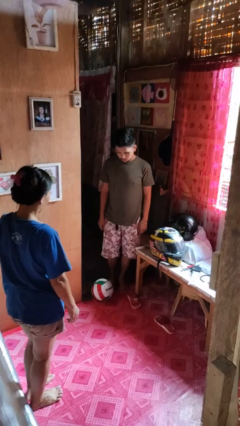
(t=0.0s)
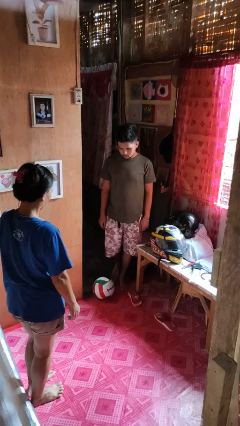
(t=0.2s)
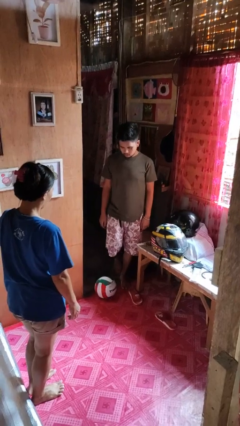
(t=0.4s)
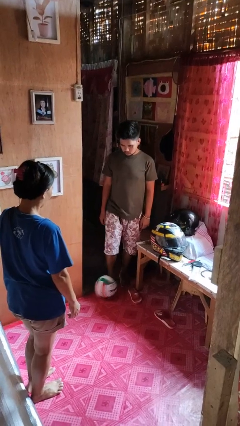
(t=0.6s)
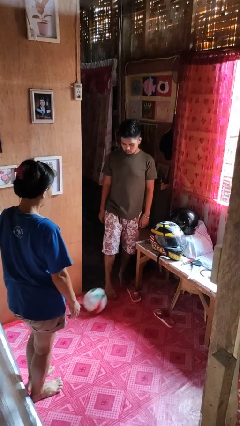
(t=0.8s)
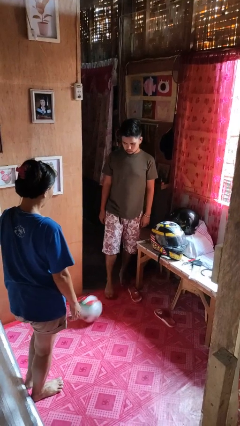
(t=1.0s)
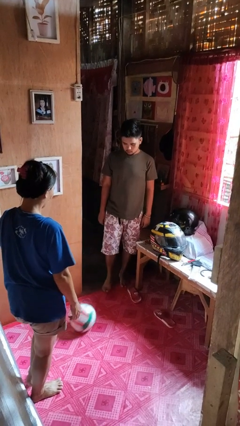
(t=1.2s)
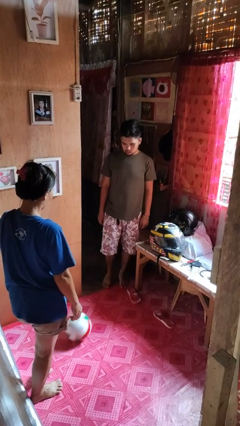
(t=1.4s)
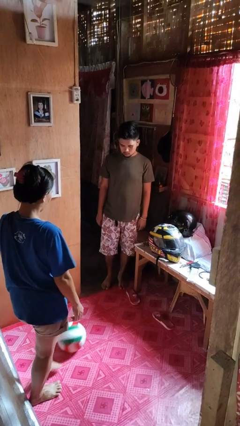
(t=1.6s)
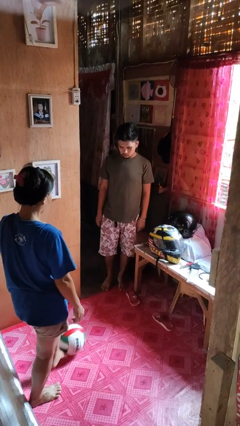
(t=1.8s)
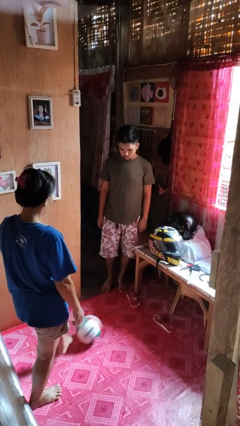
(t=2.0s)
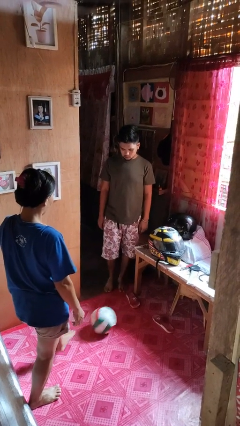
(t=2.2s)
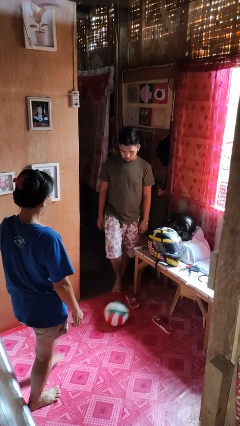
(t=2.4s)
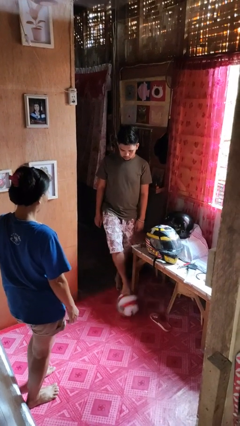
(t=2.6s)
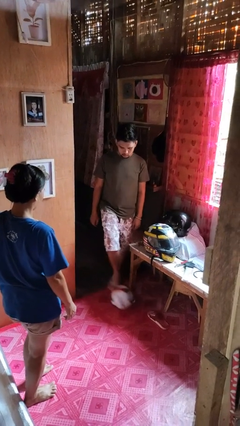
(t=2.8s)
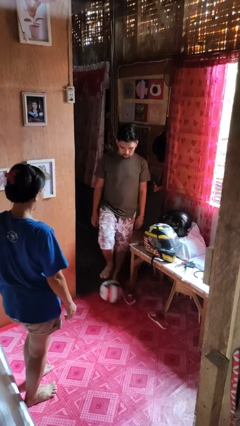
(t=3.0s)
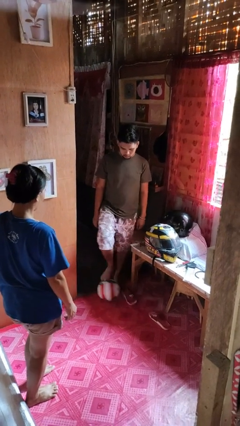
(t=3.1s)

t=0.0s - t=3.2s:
person kicks object to person

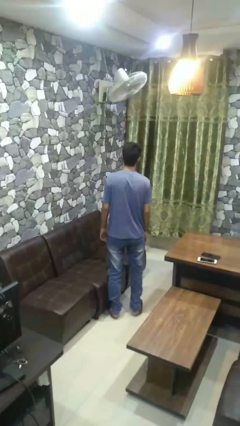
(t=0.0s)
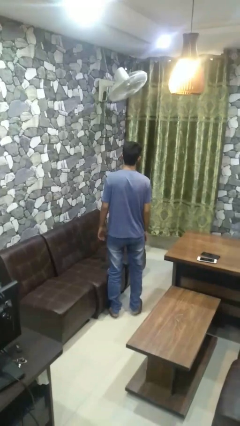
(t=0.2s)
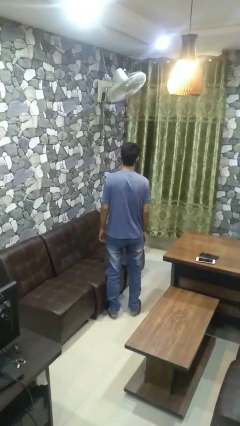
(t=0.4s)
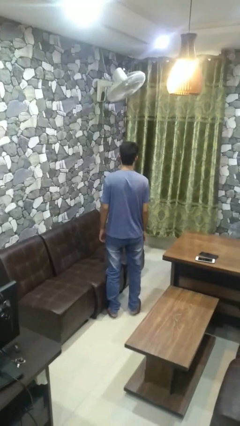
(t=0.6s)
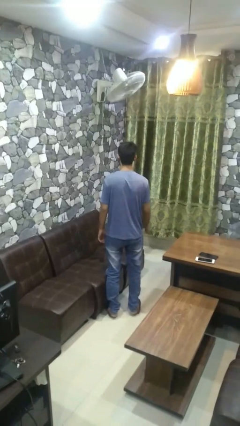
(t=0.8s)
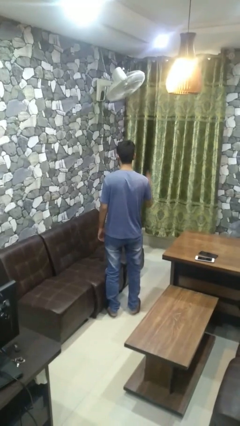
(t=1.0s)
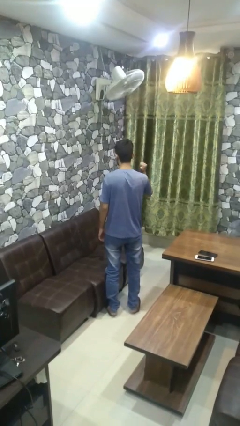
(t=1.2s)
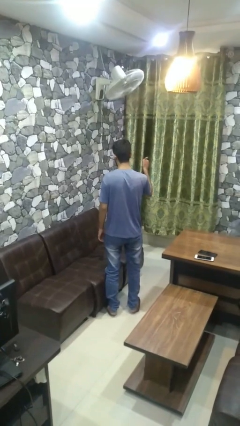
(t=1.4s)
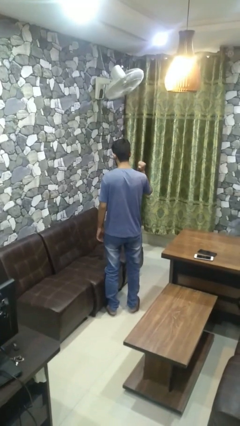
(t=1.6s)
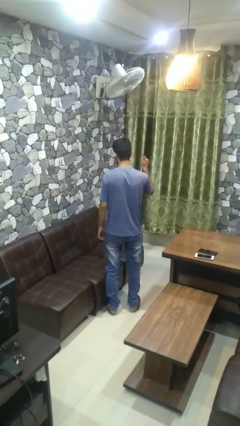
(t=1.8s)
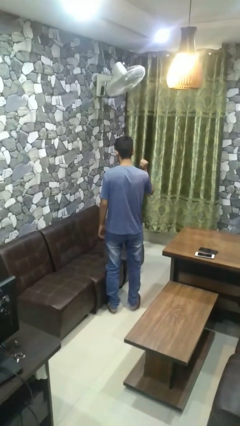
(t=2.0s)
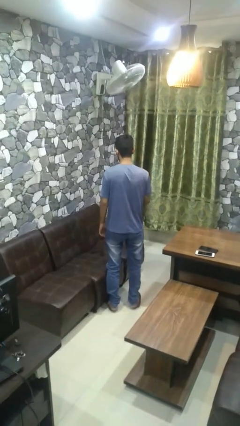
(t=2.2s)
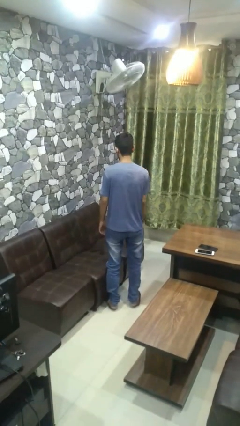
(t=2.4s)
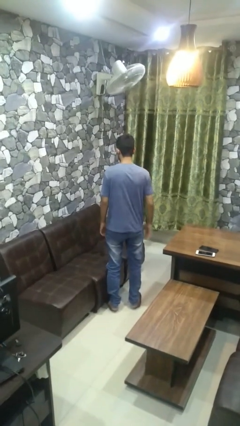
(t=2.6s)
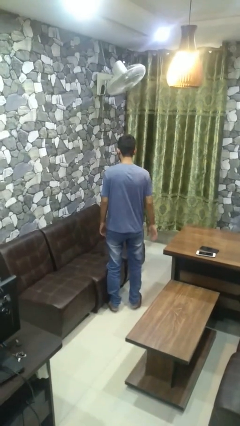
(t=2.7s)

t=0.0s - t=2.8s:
person gestures behind me

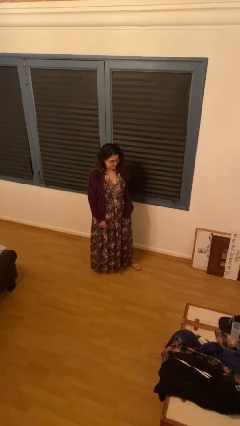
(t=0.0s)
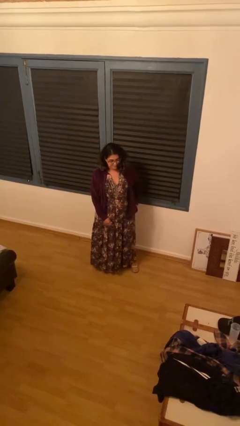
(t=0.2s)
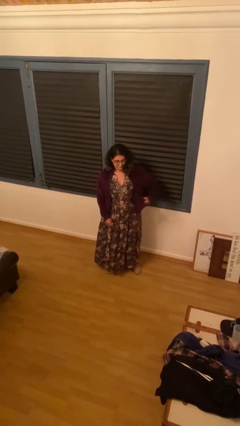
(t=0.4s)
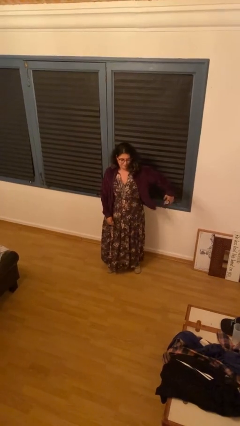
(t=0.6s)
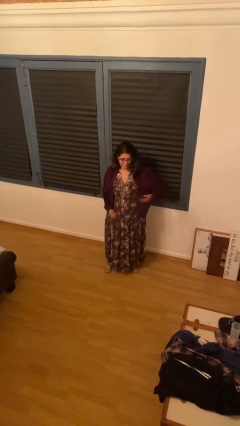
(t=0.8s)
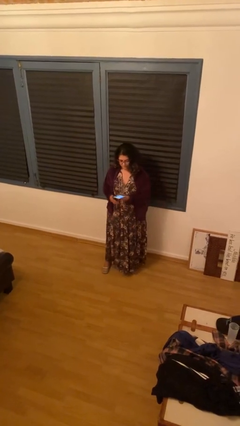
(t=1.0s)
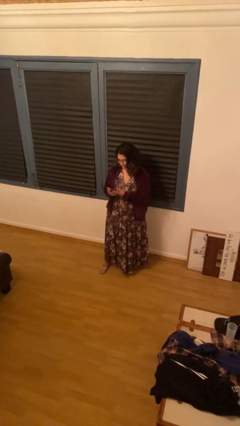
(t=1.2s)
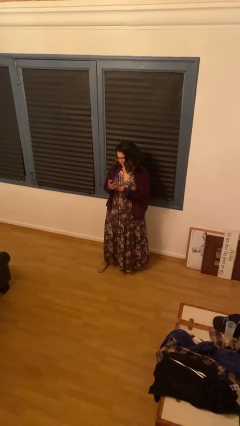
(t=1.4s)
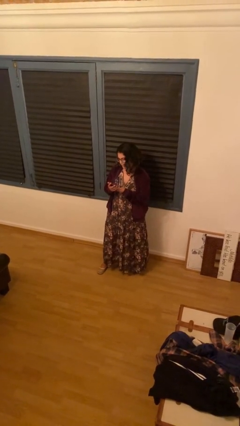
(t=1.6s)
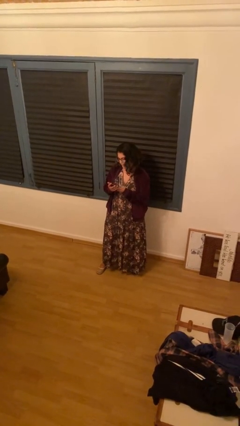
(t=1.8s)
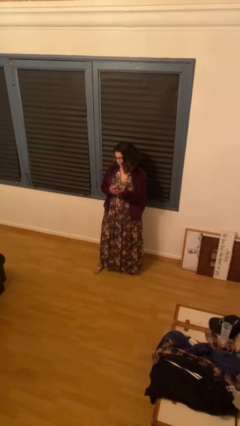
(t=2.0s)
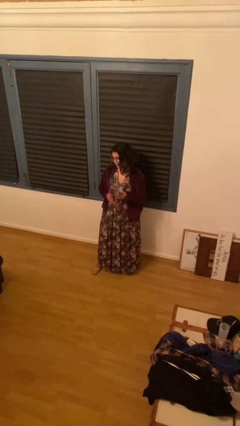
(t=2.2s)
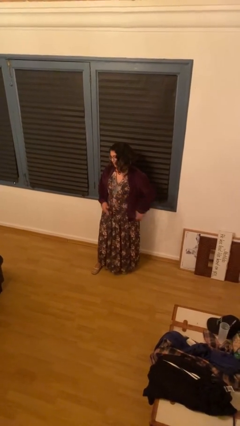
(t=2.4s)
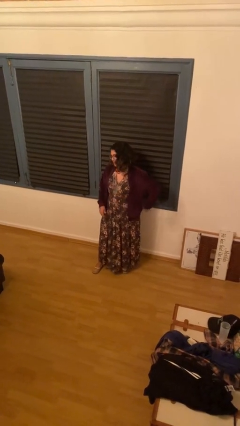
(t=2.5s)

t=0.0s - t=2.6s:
person takes phone from pocket

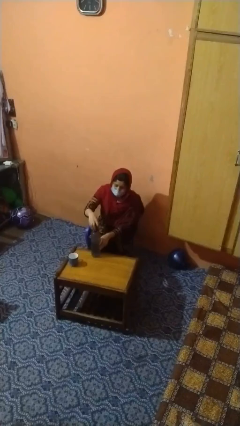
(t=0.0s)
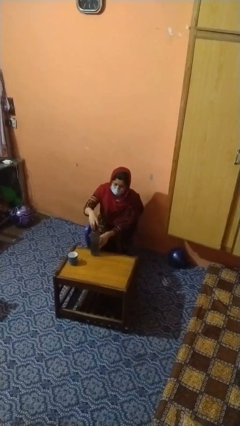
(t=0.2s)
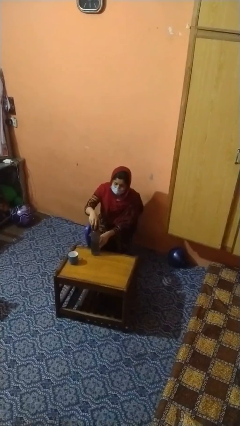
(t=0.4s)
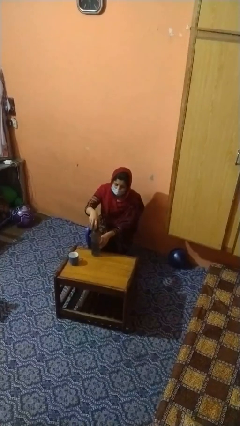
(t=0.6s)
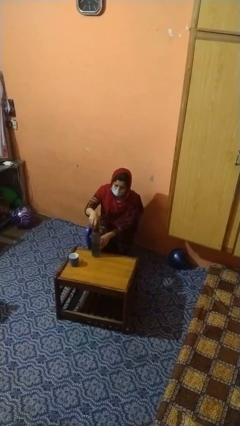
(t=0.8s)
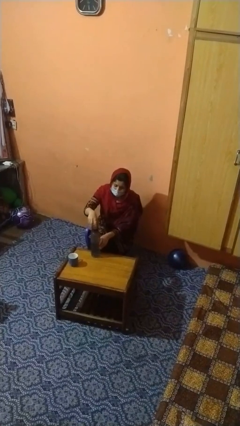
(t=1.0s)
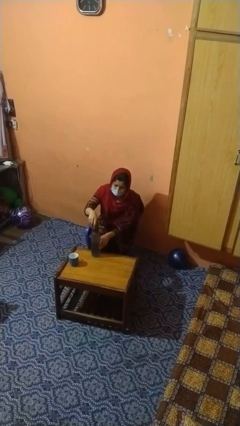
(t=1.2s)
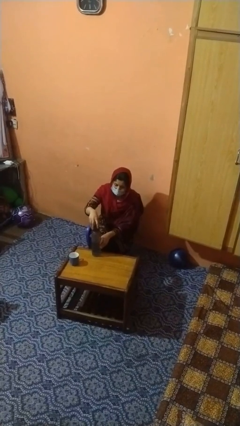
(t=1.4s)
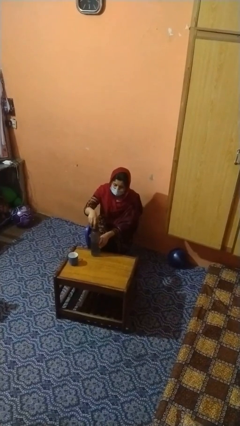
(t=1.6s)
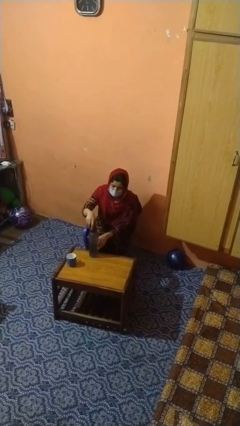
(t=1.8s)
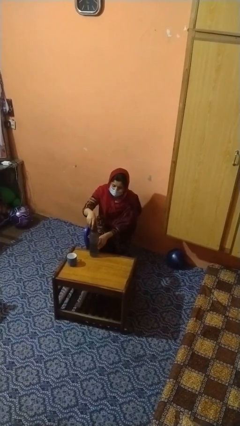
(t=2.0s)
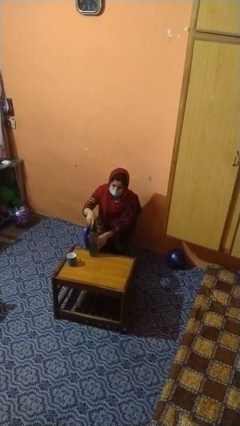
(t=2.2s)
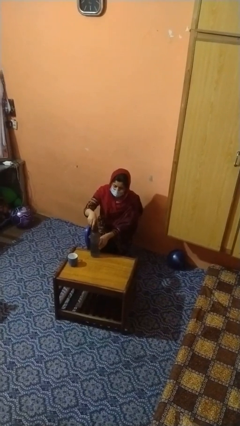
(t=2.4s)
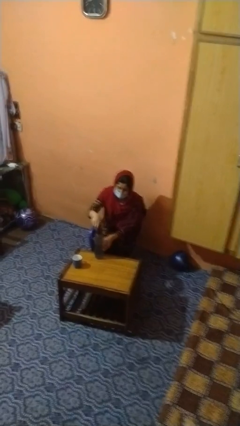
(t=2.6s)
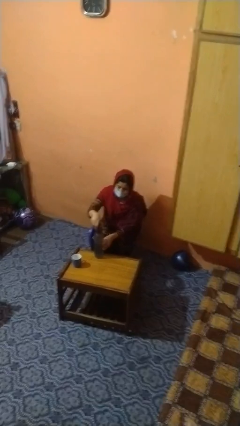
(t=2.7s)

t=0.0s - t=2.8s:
person screws lid to bottle

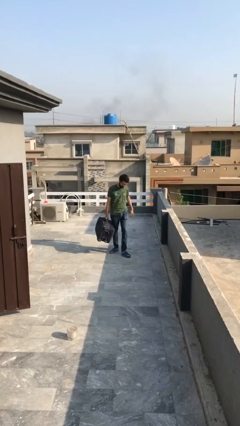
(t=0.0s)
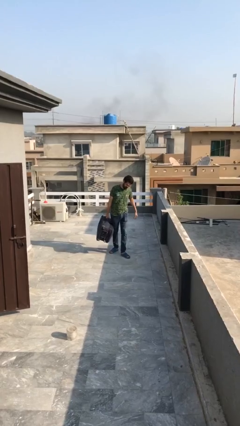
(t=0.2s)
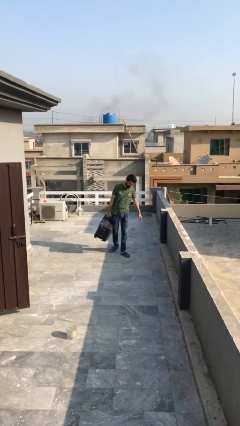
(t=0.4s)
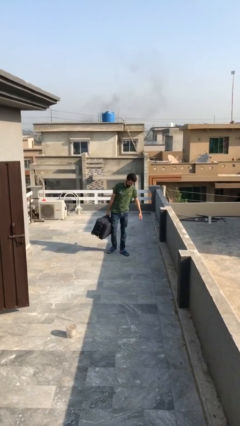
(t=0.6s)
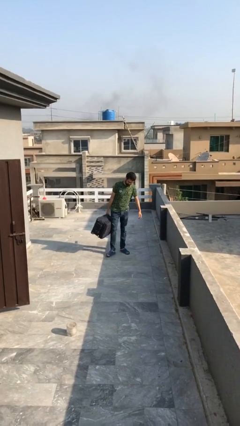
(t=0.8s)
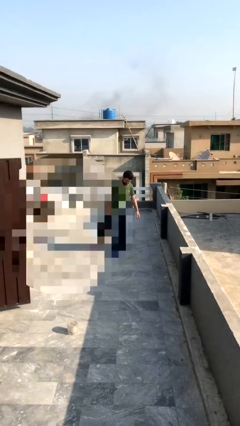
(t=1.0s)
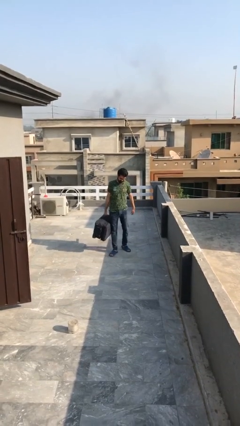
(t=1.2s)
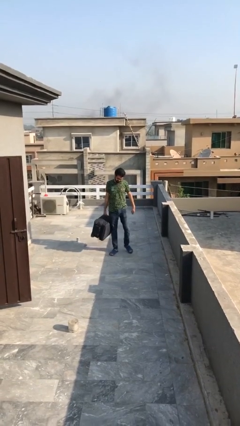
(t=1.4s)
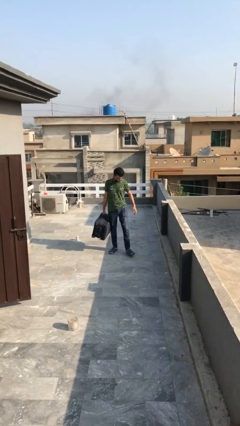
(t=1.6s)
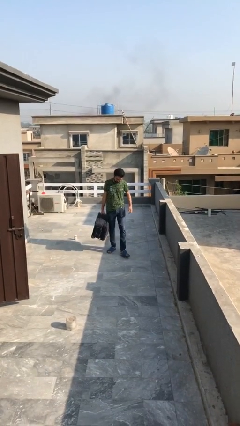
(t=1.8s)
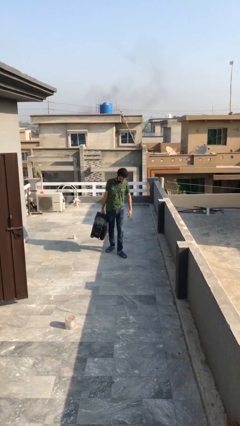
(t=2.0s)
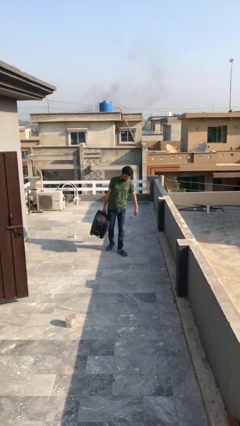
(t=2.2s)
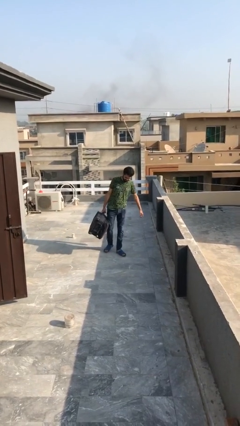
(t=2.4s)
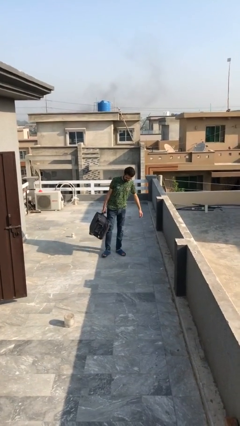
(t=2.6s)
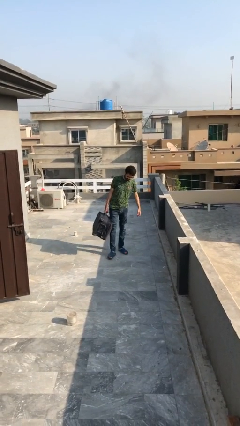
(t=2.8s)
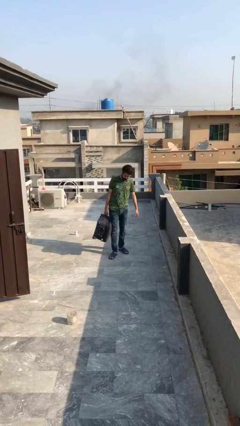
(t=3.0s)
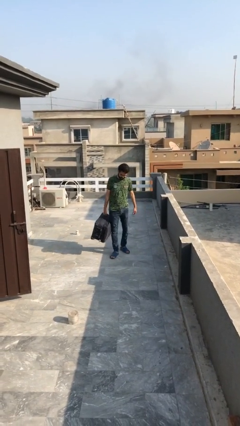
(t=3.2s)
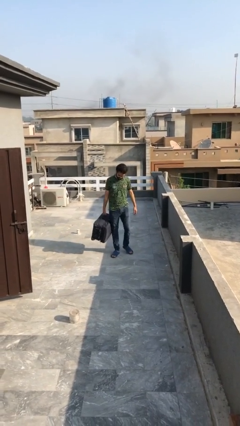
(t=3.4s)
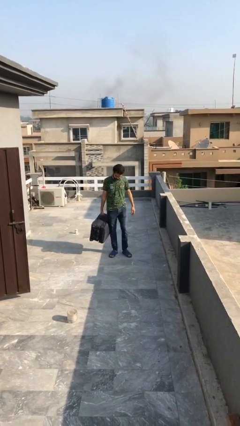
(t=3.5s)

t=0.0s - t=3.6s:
person carries heavy object

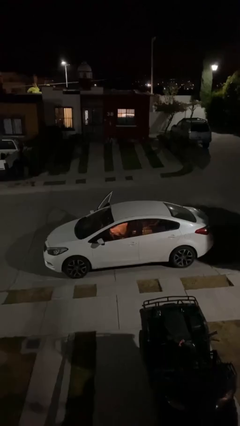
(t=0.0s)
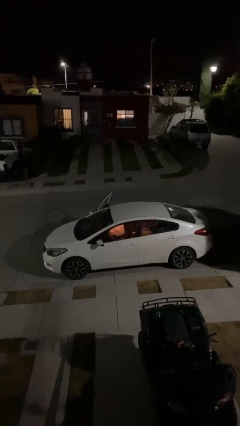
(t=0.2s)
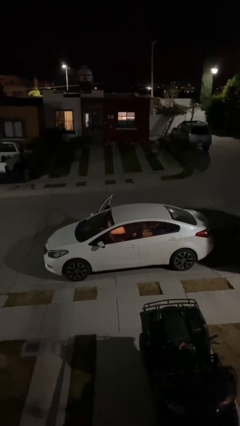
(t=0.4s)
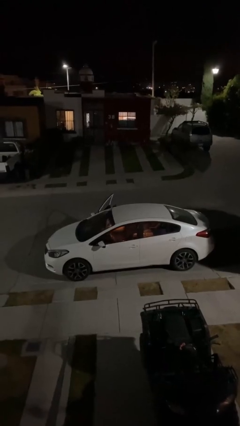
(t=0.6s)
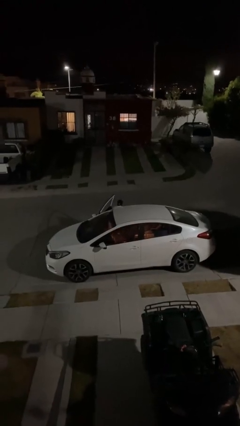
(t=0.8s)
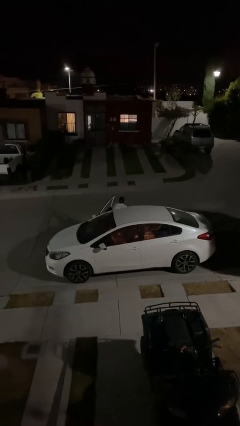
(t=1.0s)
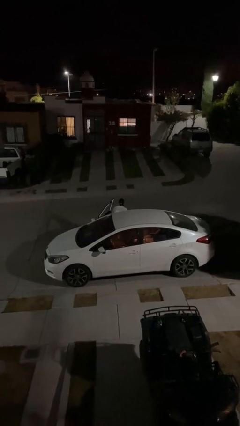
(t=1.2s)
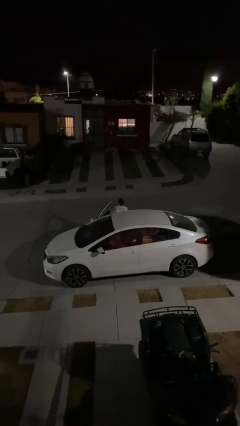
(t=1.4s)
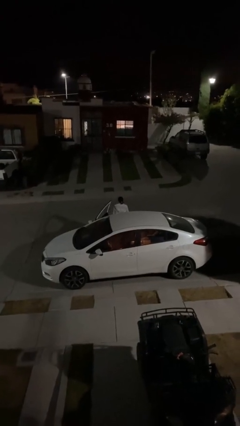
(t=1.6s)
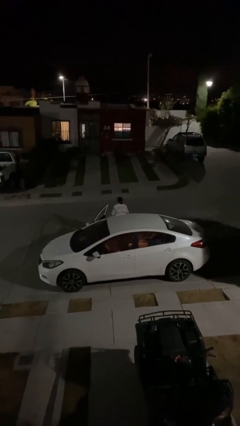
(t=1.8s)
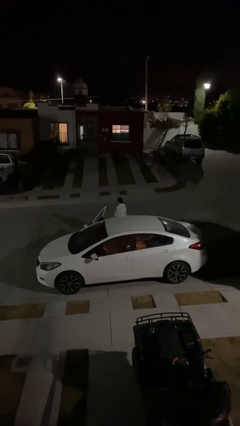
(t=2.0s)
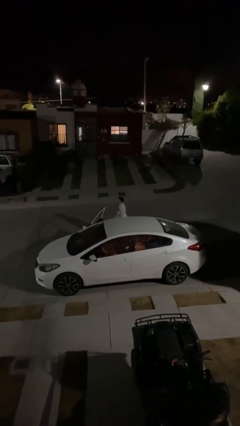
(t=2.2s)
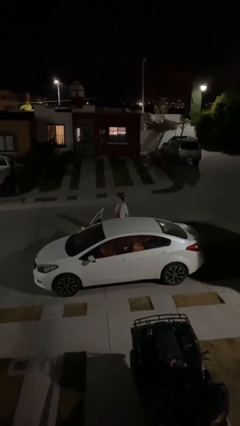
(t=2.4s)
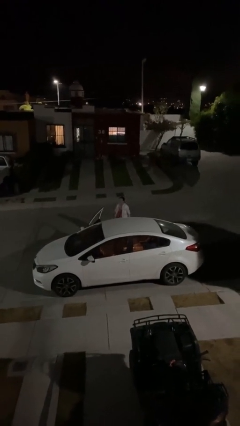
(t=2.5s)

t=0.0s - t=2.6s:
person exits car
